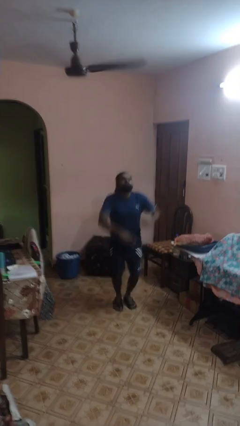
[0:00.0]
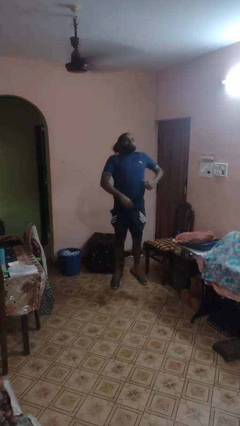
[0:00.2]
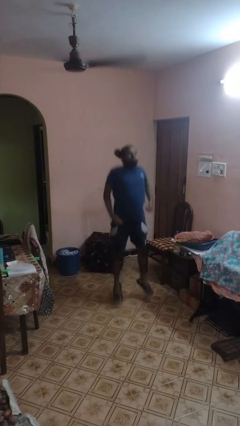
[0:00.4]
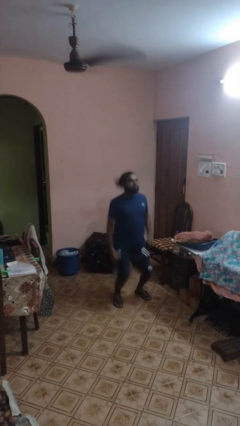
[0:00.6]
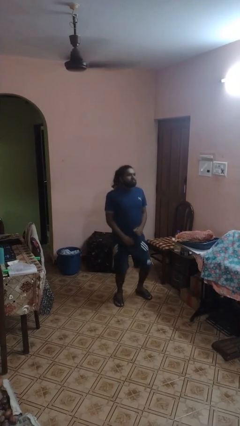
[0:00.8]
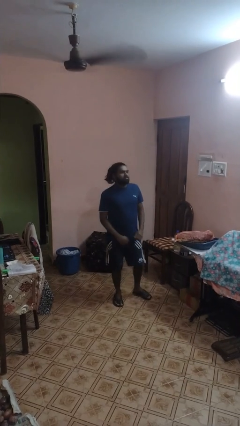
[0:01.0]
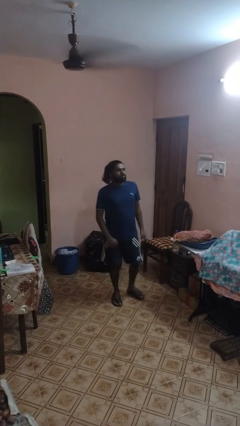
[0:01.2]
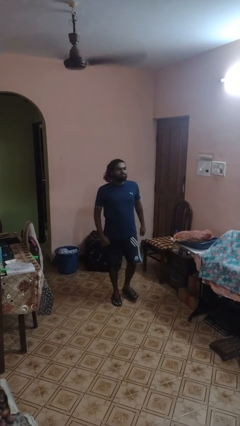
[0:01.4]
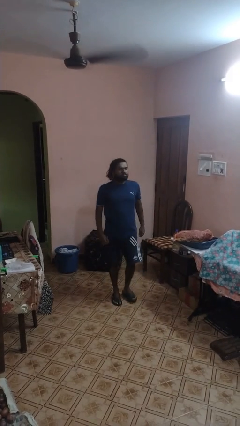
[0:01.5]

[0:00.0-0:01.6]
person jumps

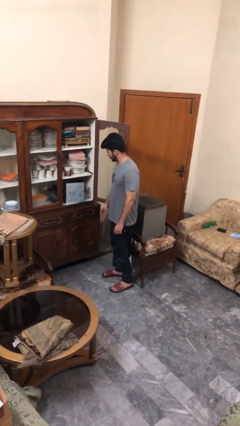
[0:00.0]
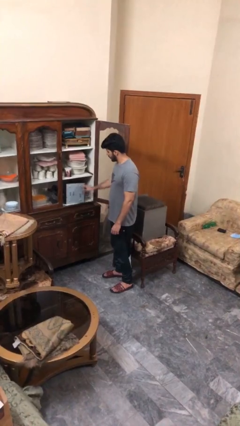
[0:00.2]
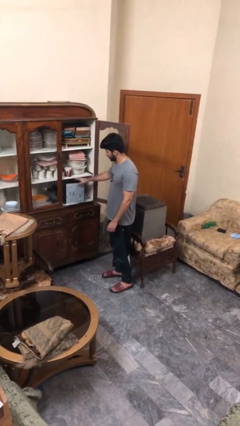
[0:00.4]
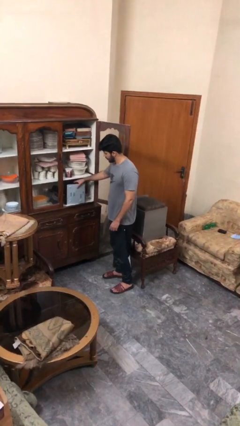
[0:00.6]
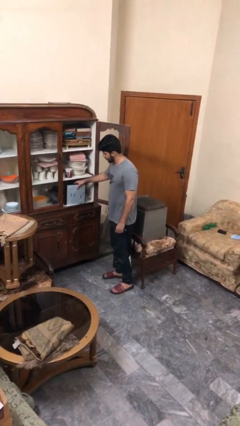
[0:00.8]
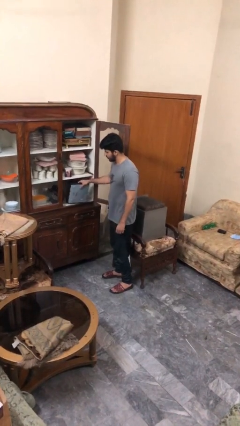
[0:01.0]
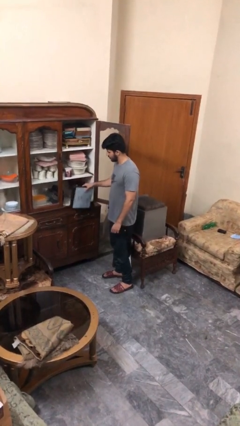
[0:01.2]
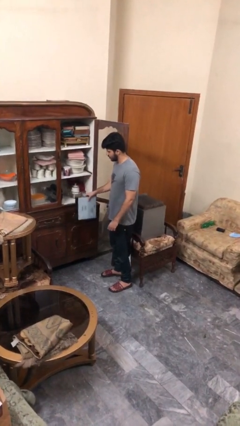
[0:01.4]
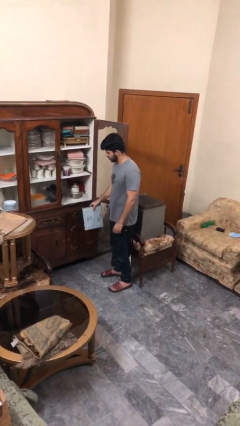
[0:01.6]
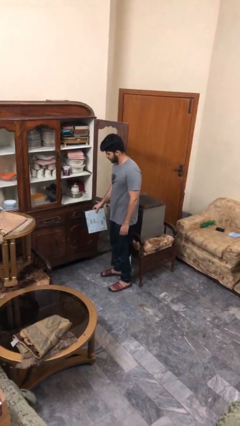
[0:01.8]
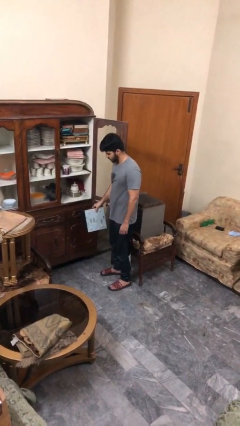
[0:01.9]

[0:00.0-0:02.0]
person picks up object from countertop

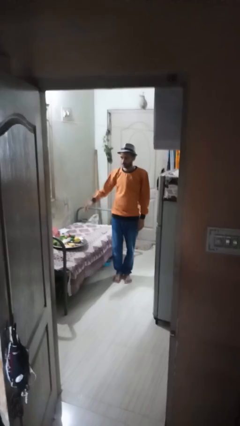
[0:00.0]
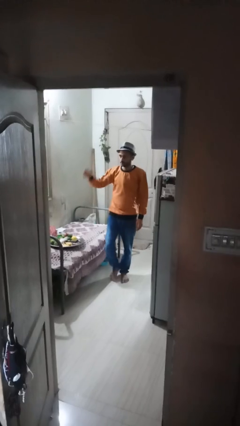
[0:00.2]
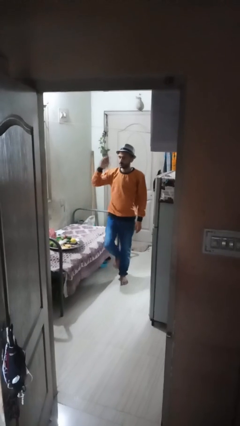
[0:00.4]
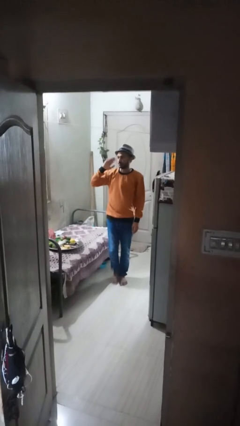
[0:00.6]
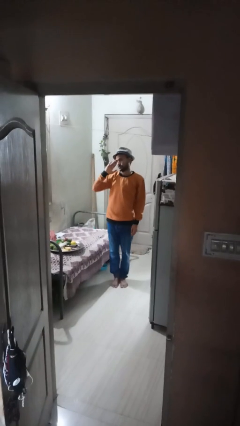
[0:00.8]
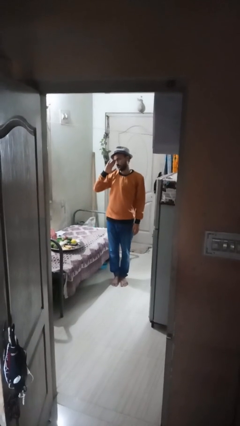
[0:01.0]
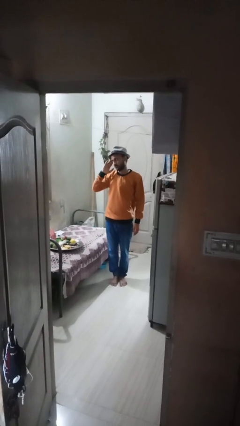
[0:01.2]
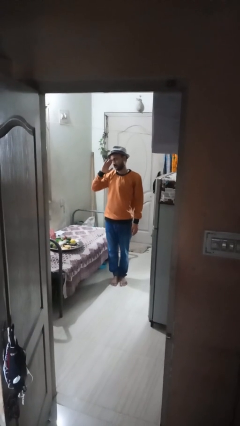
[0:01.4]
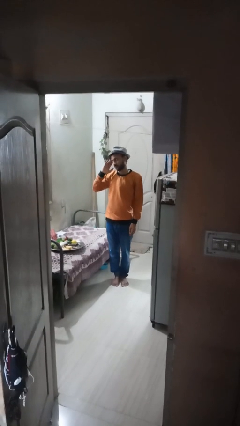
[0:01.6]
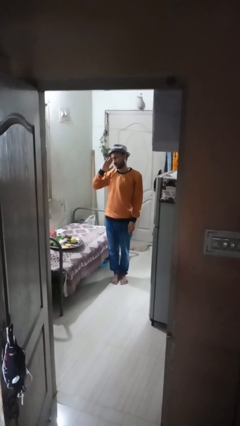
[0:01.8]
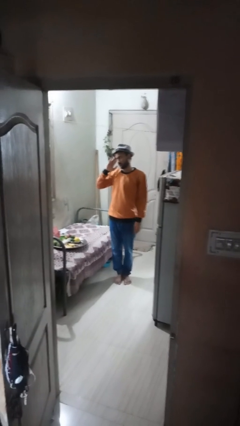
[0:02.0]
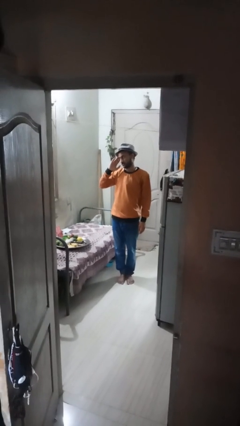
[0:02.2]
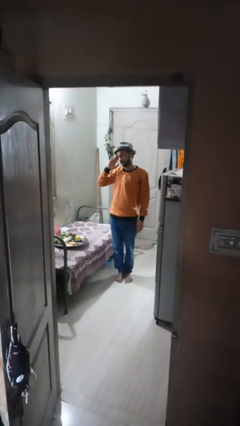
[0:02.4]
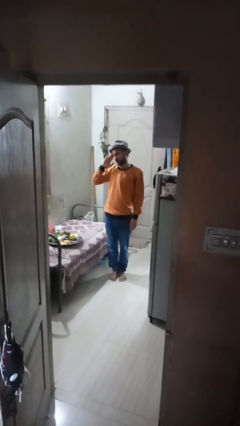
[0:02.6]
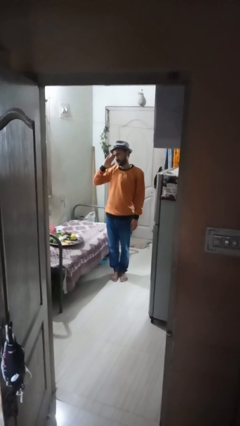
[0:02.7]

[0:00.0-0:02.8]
person salutes

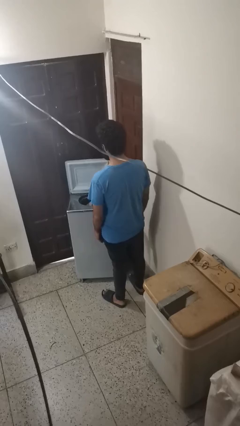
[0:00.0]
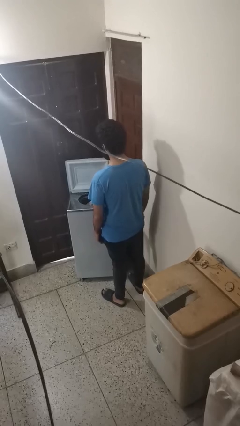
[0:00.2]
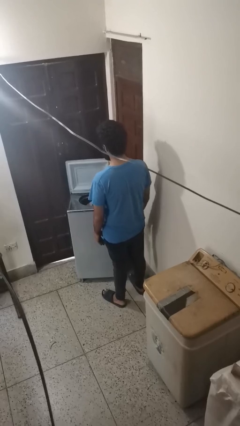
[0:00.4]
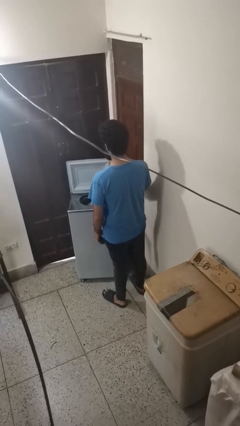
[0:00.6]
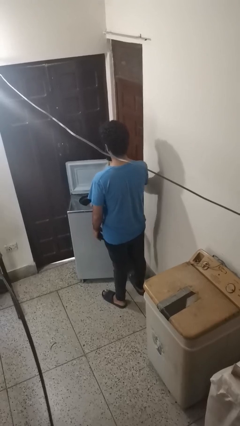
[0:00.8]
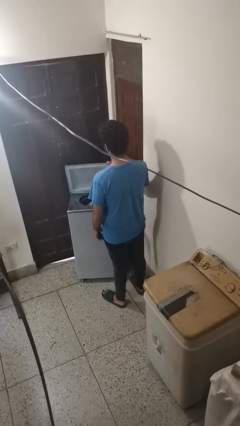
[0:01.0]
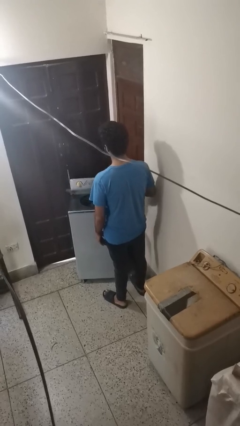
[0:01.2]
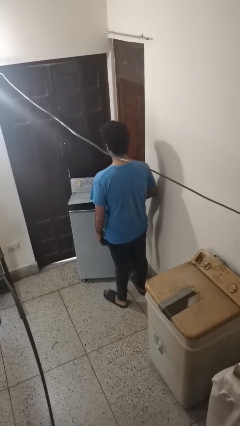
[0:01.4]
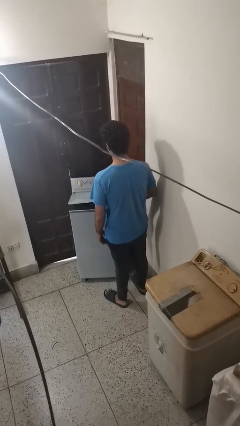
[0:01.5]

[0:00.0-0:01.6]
person closes clothes washer

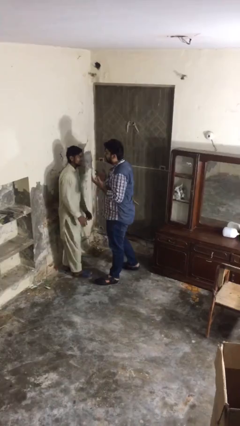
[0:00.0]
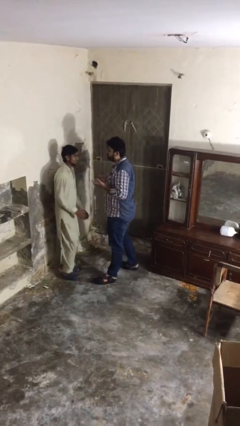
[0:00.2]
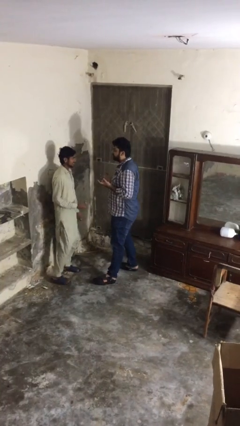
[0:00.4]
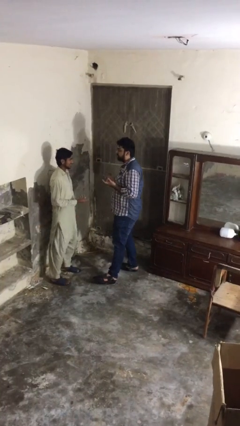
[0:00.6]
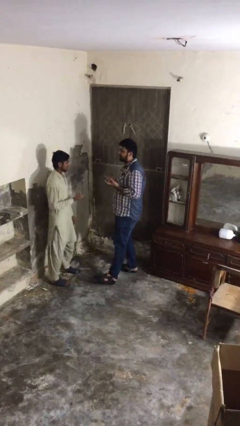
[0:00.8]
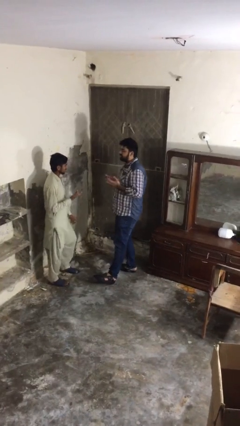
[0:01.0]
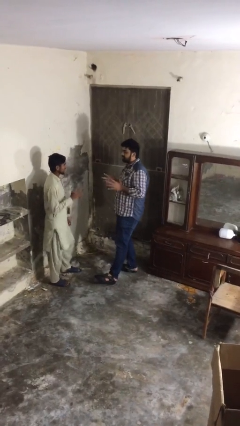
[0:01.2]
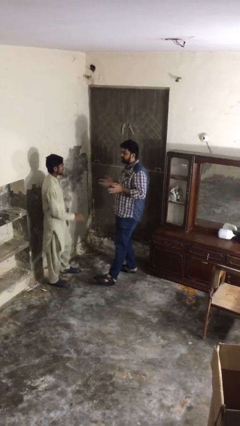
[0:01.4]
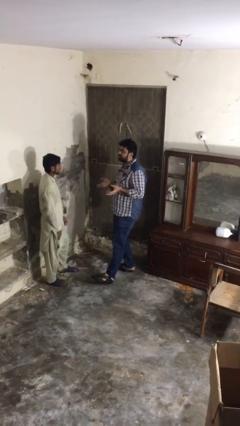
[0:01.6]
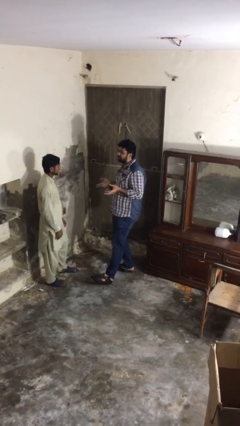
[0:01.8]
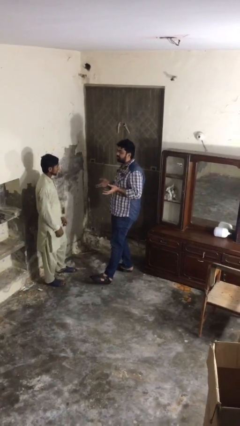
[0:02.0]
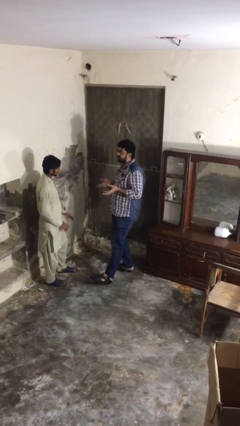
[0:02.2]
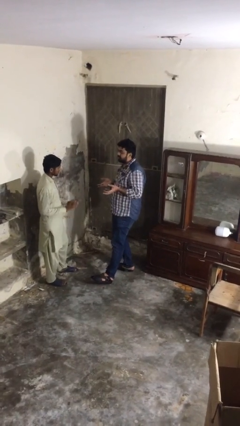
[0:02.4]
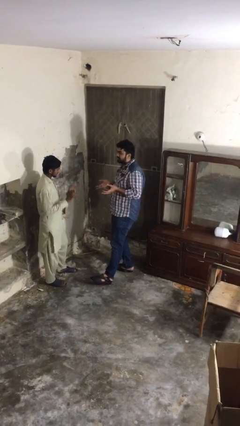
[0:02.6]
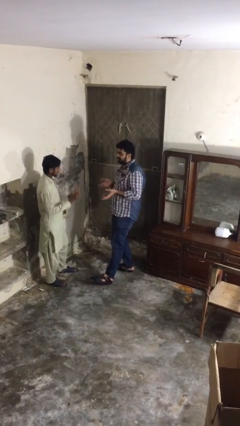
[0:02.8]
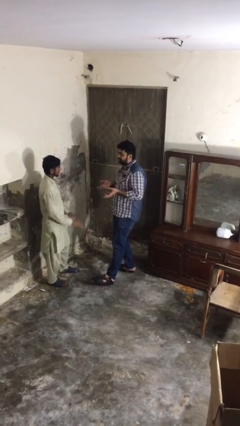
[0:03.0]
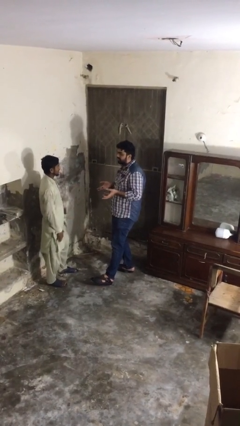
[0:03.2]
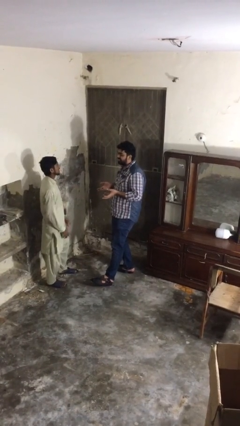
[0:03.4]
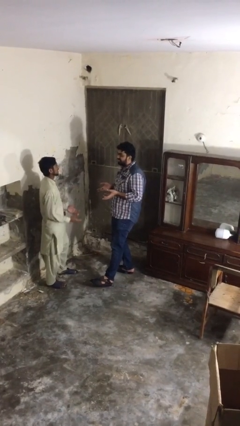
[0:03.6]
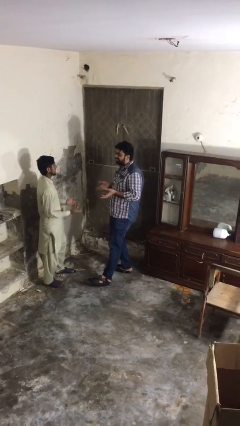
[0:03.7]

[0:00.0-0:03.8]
person talks to person

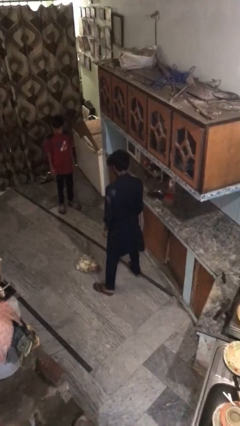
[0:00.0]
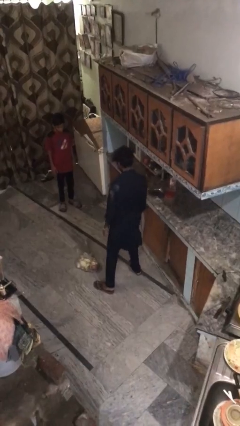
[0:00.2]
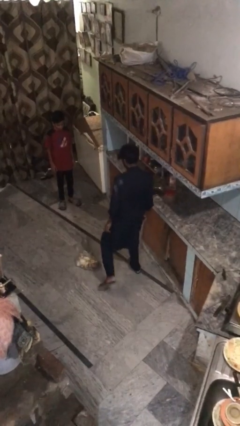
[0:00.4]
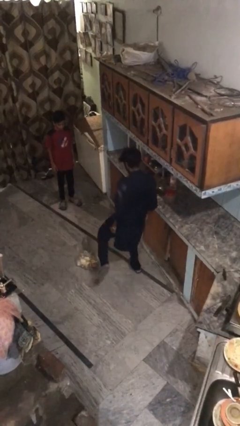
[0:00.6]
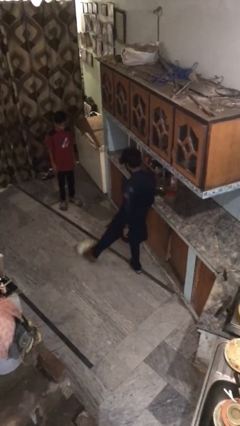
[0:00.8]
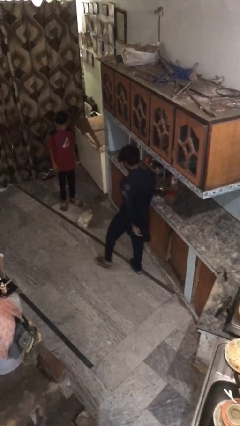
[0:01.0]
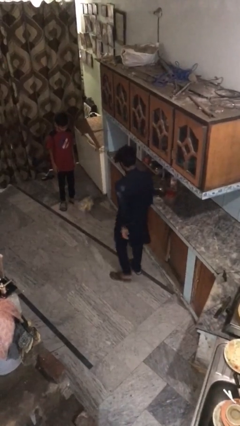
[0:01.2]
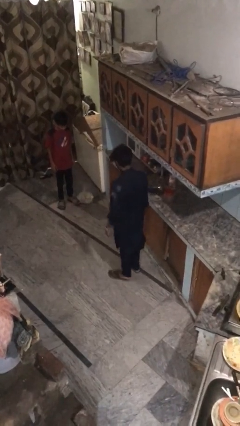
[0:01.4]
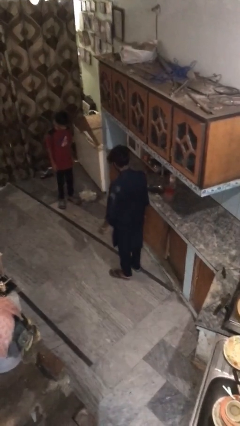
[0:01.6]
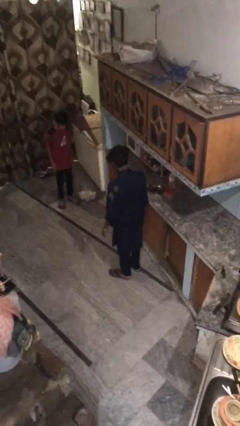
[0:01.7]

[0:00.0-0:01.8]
person kicks object to person

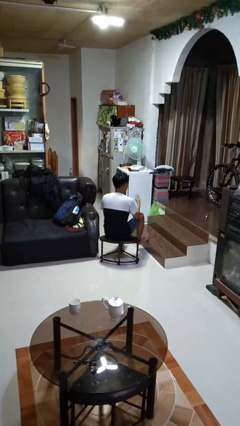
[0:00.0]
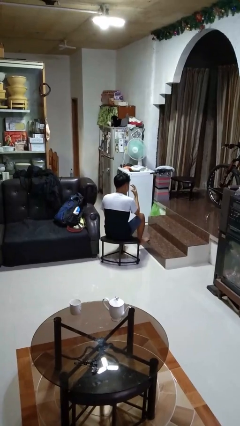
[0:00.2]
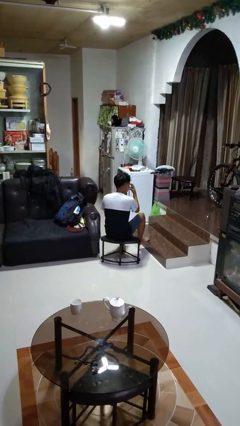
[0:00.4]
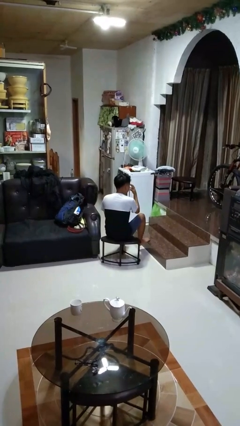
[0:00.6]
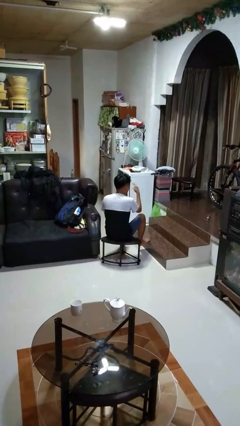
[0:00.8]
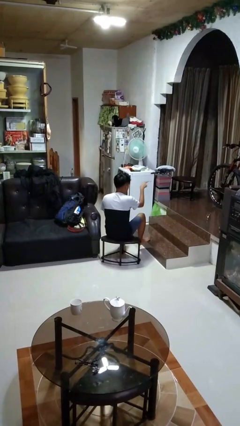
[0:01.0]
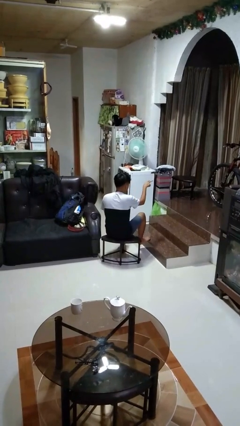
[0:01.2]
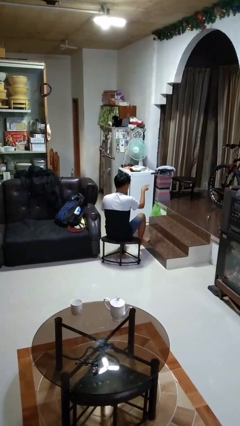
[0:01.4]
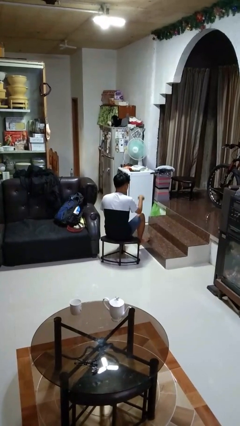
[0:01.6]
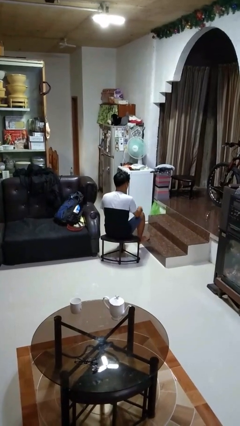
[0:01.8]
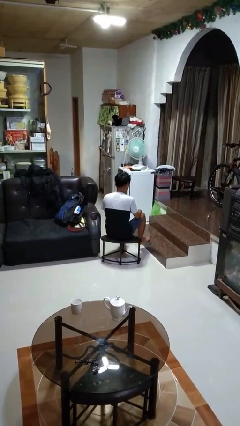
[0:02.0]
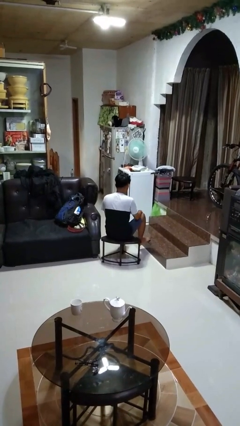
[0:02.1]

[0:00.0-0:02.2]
person gestures watch closely

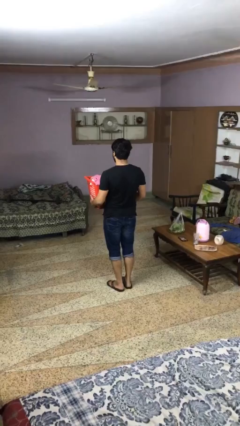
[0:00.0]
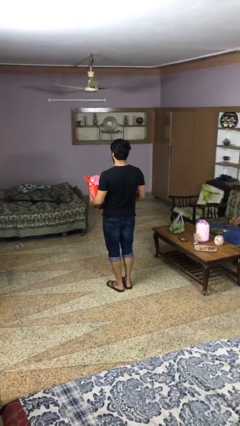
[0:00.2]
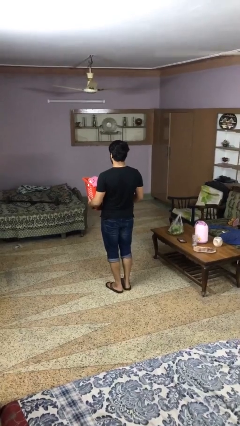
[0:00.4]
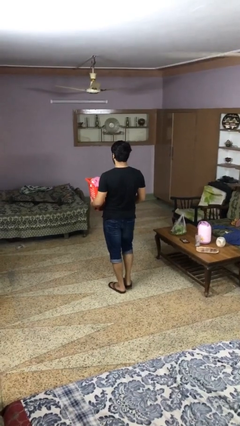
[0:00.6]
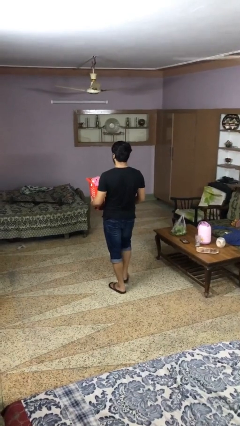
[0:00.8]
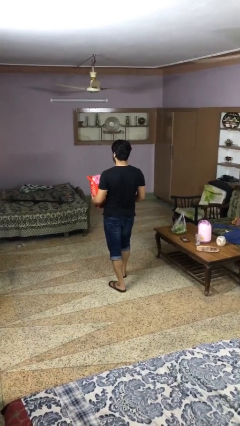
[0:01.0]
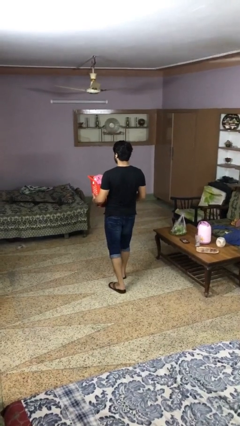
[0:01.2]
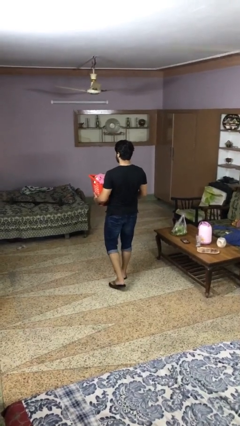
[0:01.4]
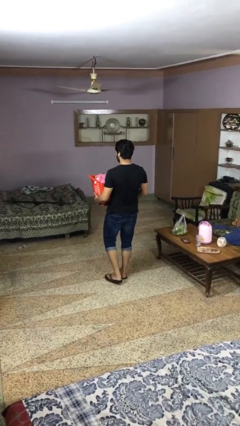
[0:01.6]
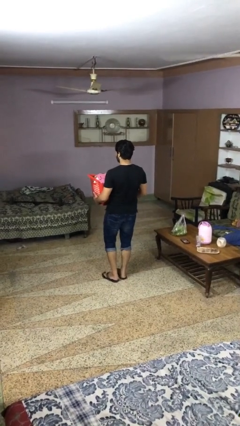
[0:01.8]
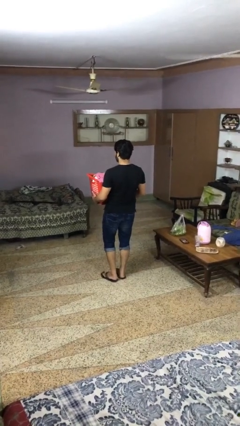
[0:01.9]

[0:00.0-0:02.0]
person carries laundry basket
